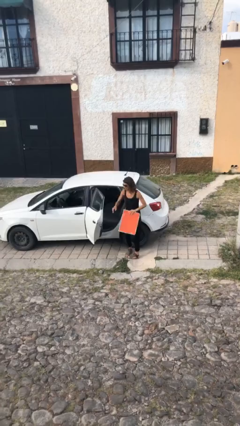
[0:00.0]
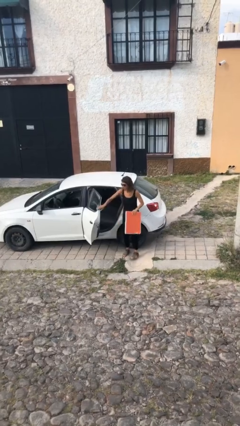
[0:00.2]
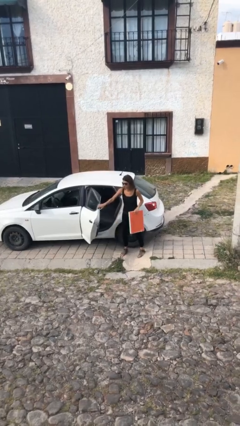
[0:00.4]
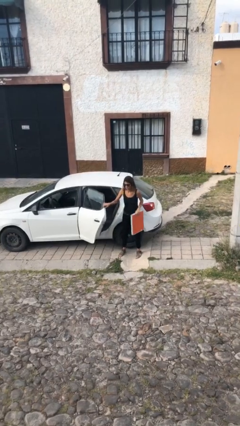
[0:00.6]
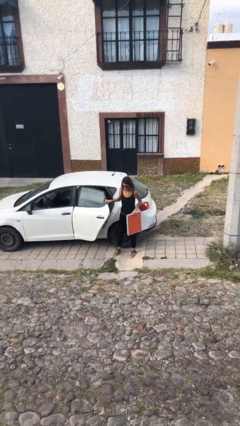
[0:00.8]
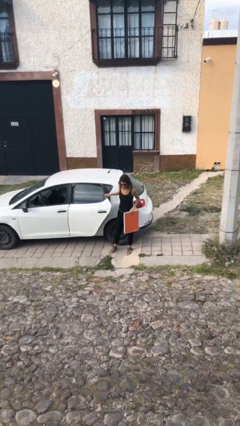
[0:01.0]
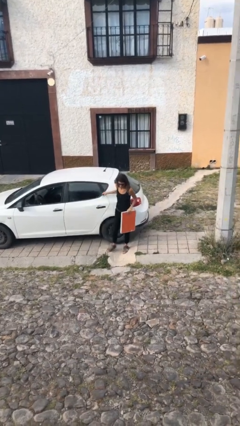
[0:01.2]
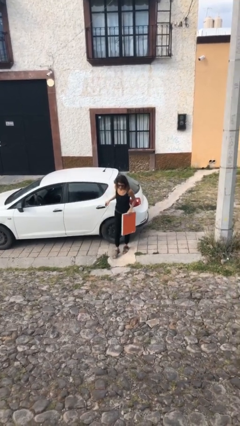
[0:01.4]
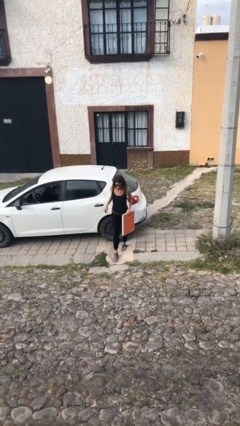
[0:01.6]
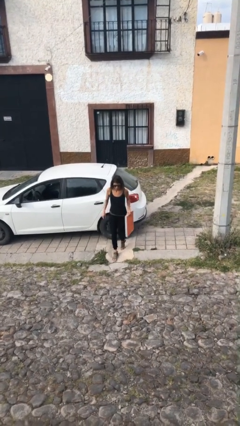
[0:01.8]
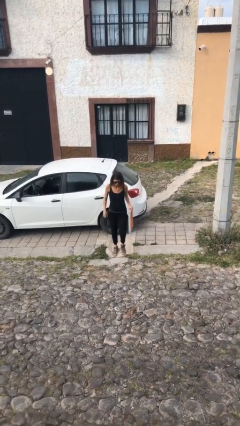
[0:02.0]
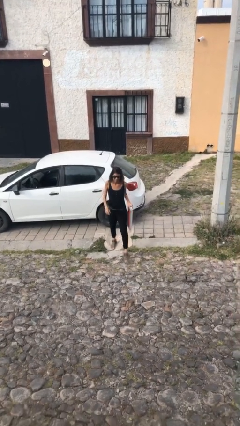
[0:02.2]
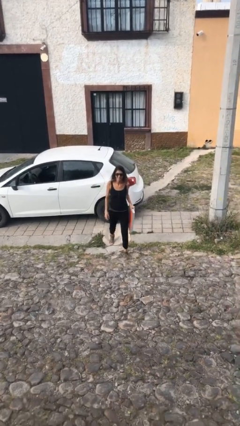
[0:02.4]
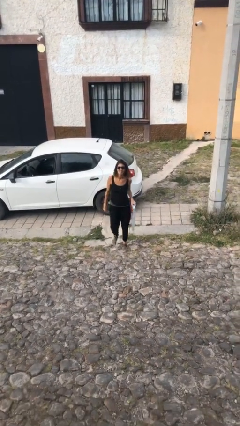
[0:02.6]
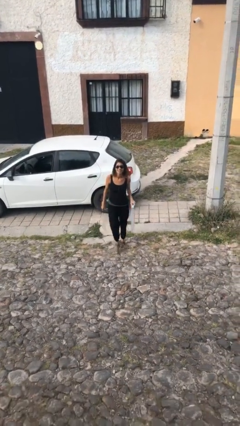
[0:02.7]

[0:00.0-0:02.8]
person closes car door

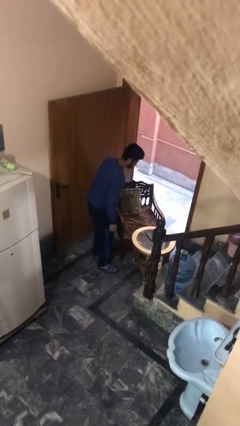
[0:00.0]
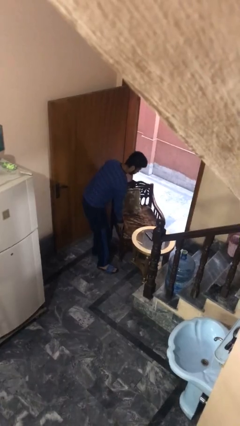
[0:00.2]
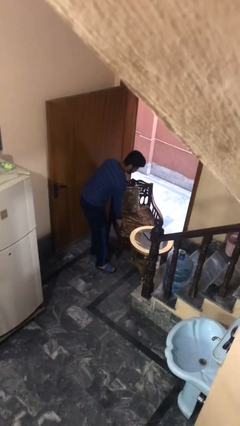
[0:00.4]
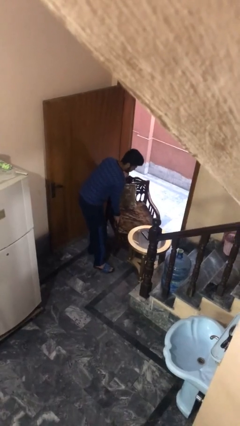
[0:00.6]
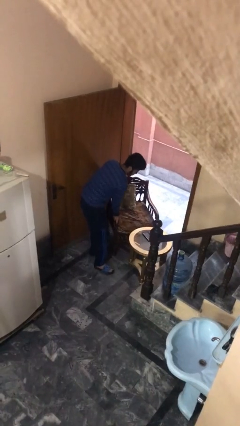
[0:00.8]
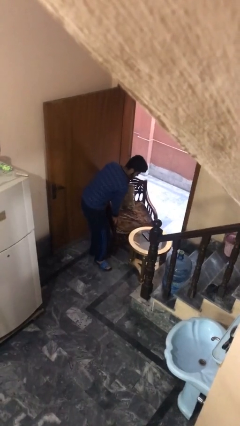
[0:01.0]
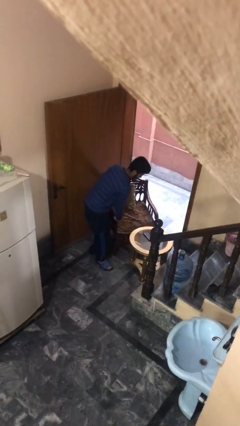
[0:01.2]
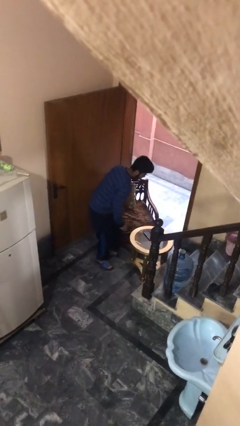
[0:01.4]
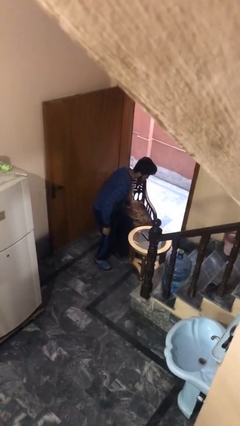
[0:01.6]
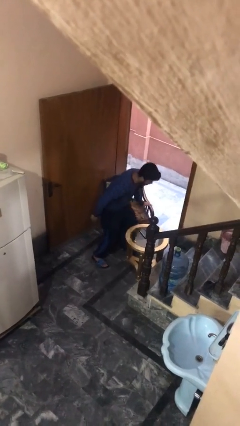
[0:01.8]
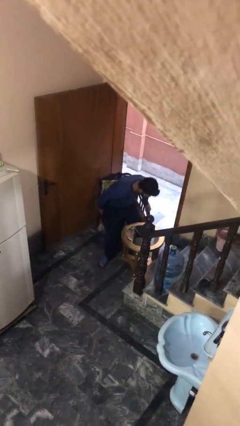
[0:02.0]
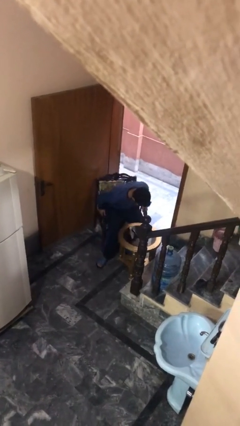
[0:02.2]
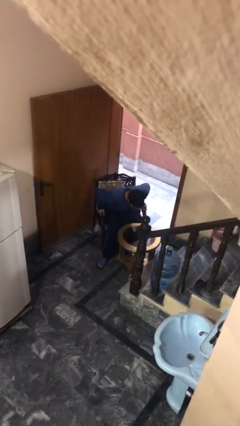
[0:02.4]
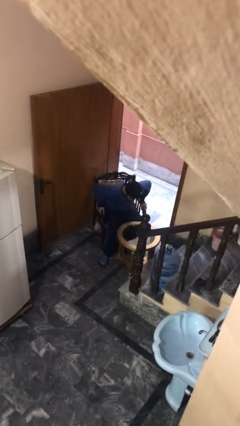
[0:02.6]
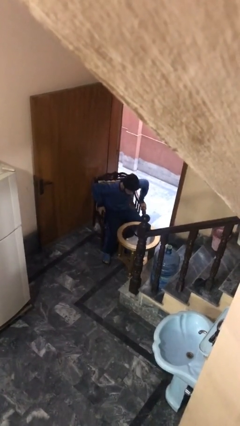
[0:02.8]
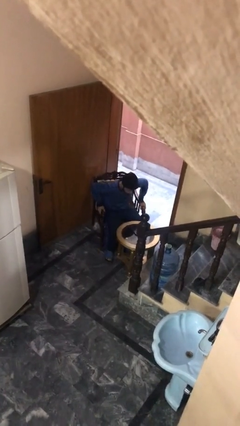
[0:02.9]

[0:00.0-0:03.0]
person sits down

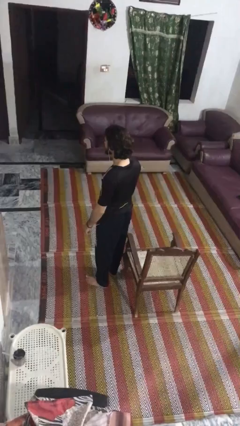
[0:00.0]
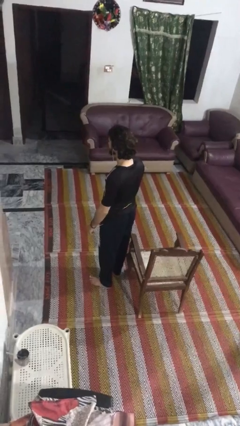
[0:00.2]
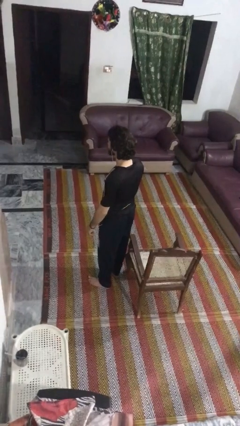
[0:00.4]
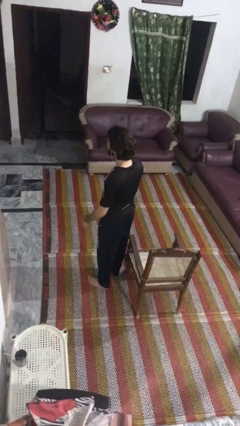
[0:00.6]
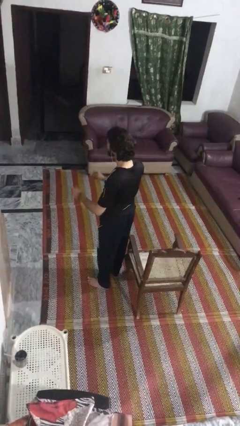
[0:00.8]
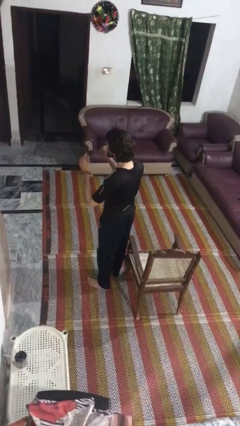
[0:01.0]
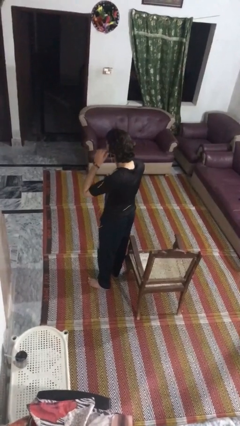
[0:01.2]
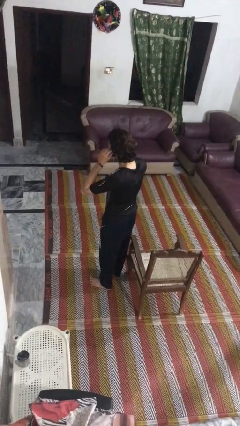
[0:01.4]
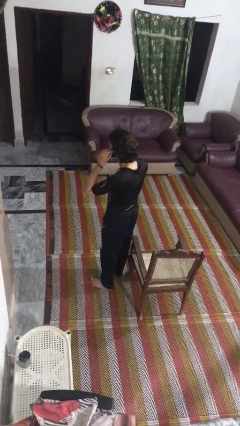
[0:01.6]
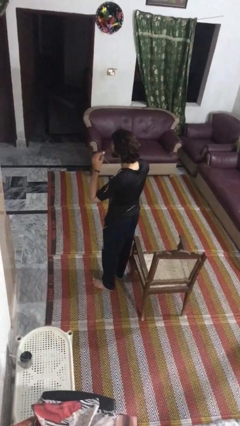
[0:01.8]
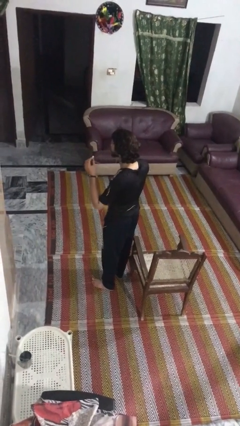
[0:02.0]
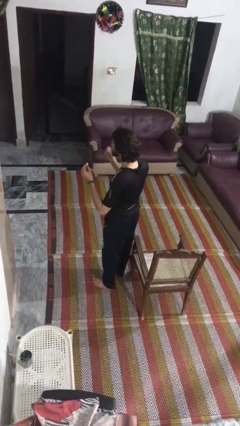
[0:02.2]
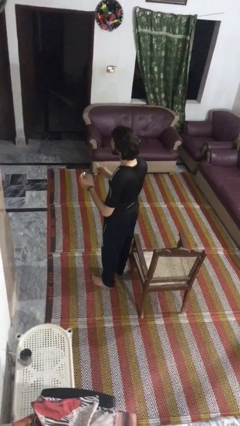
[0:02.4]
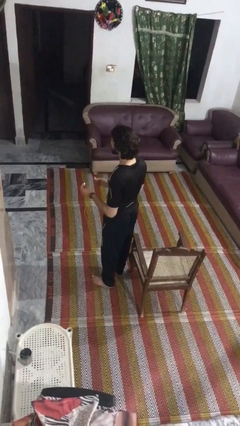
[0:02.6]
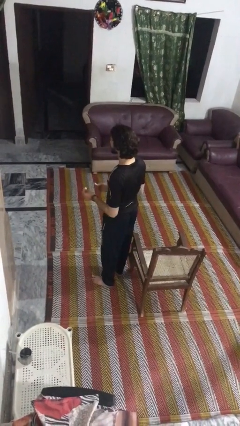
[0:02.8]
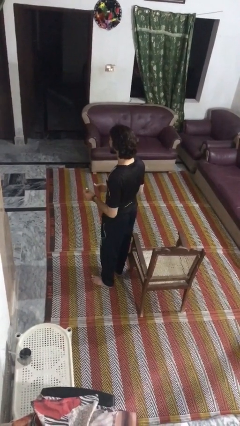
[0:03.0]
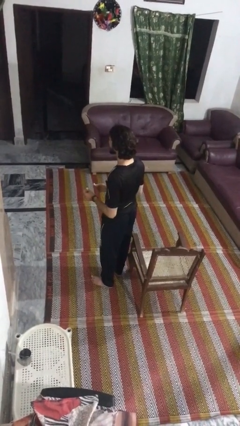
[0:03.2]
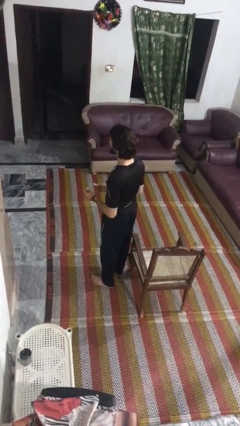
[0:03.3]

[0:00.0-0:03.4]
person takes off headphones

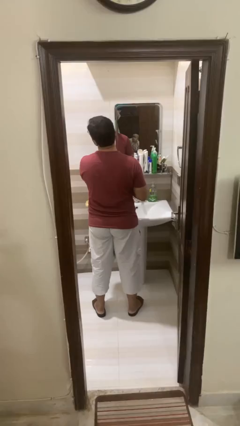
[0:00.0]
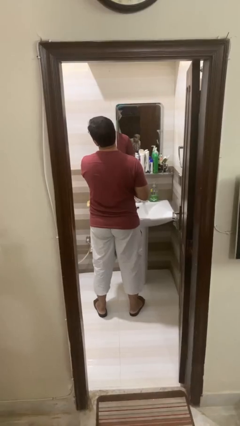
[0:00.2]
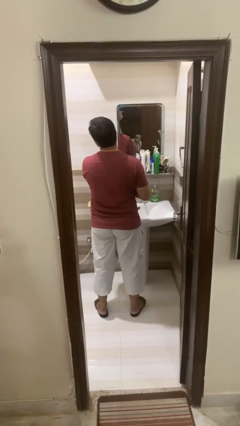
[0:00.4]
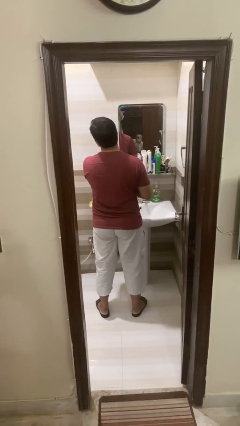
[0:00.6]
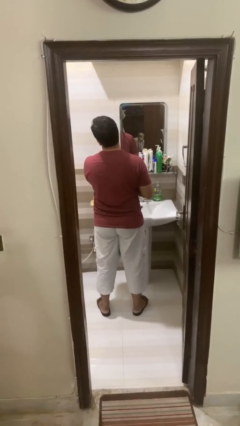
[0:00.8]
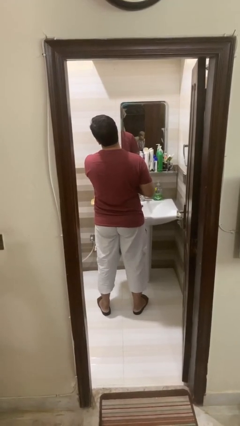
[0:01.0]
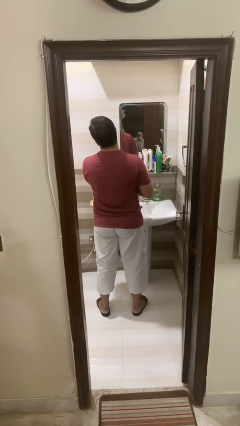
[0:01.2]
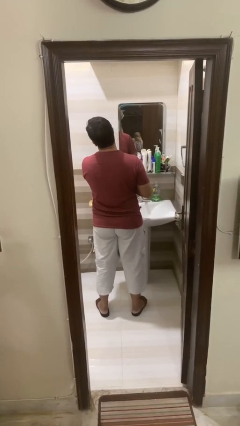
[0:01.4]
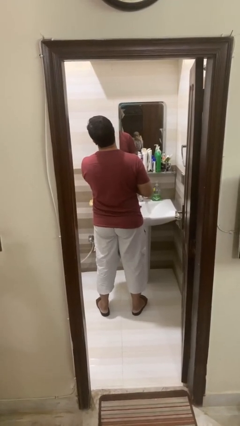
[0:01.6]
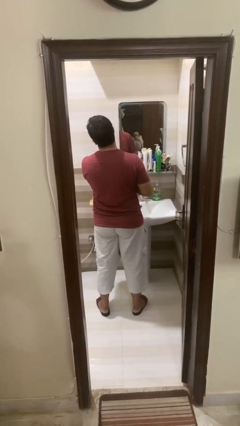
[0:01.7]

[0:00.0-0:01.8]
person applies shaving cream

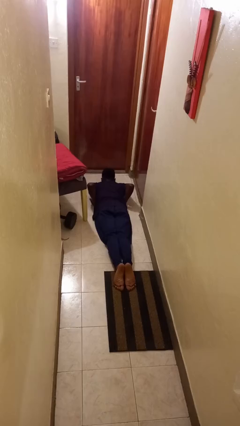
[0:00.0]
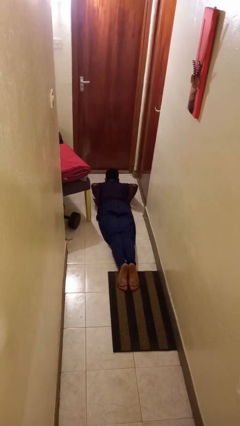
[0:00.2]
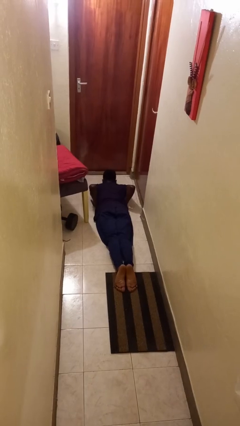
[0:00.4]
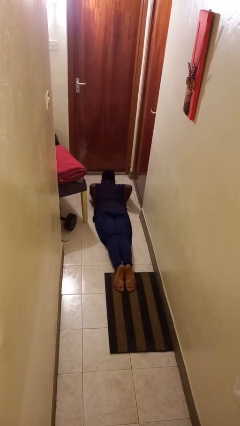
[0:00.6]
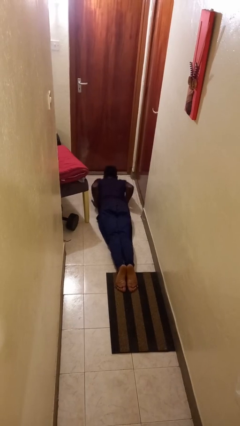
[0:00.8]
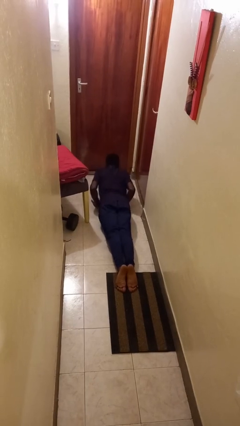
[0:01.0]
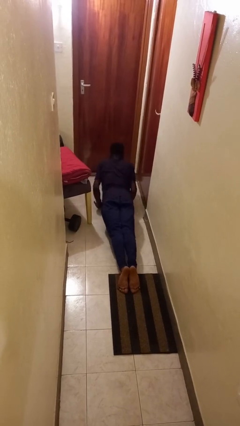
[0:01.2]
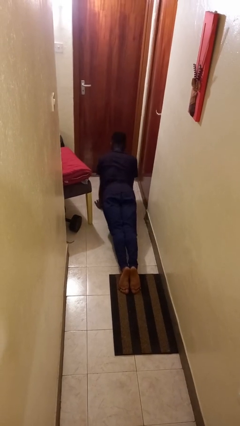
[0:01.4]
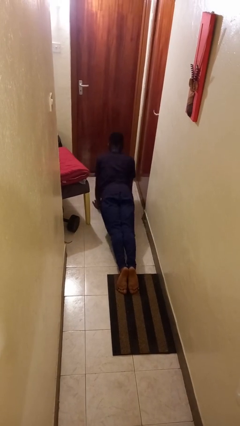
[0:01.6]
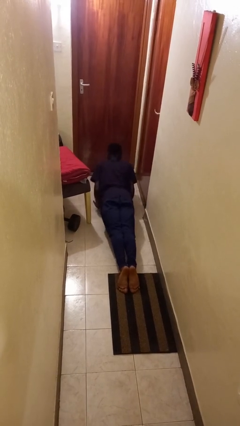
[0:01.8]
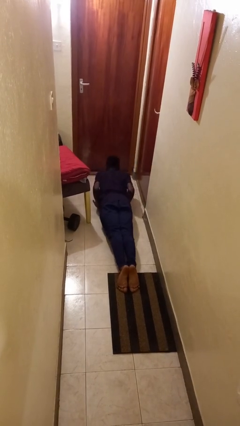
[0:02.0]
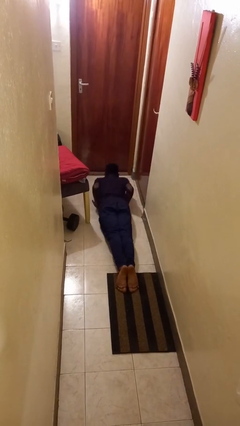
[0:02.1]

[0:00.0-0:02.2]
person exercises with pushup

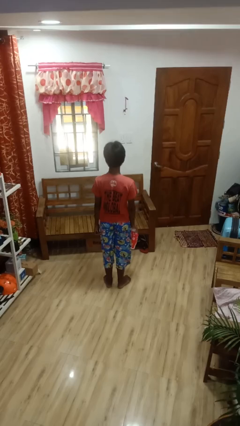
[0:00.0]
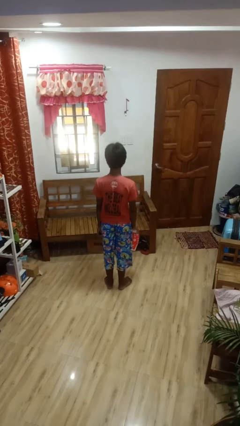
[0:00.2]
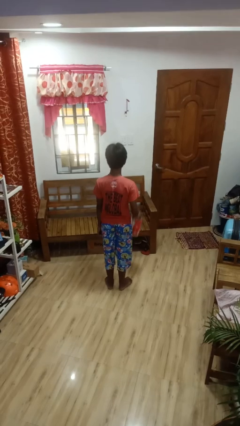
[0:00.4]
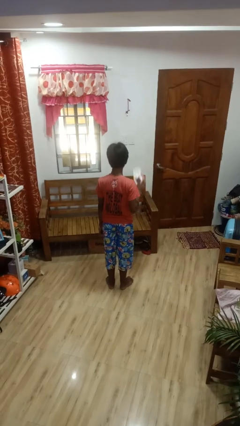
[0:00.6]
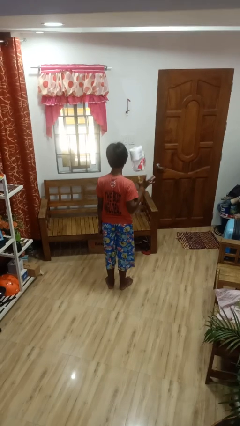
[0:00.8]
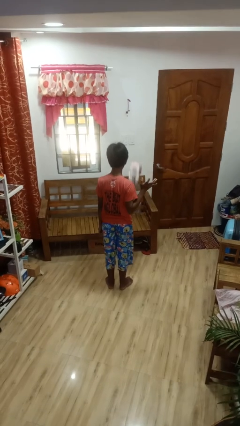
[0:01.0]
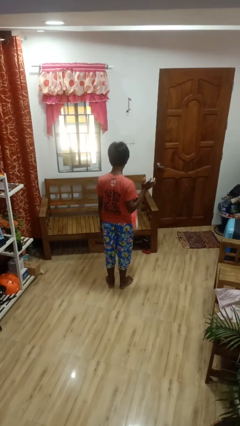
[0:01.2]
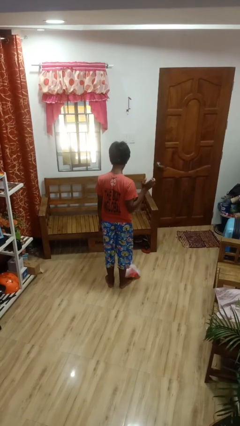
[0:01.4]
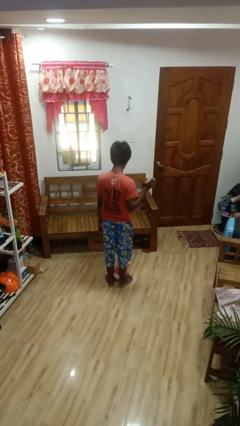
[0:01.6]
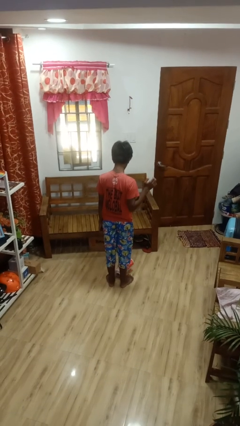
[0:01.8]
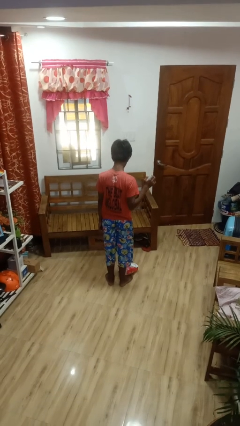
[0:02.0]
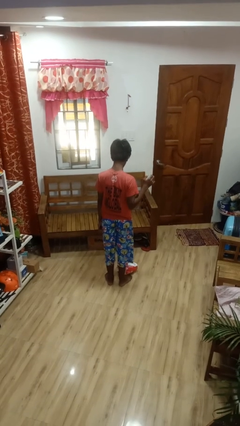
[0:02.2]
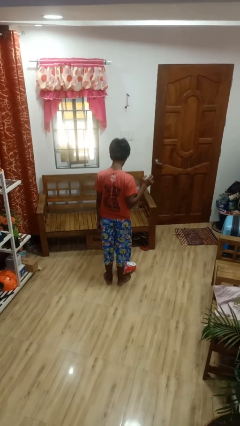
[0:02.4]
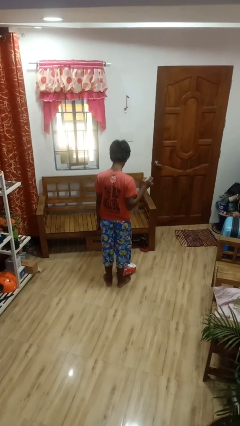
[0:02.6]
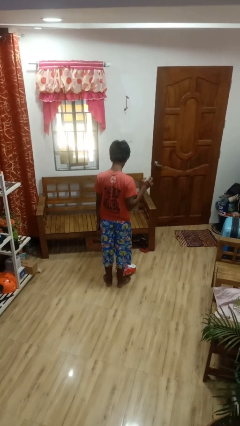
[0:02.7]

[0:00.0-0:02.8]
person throws object into air

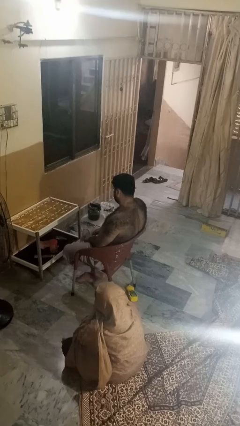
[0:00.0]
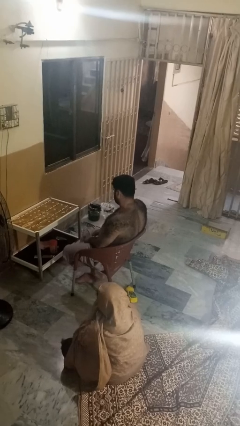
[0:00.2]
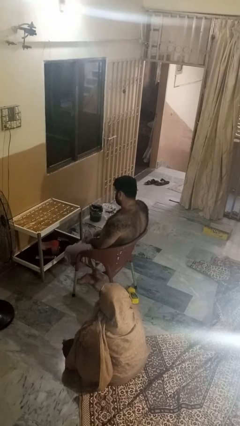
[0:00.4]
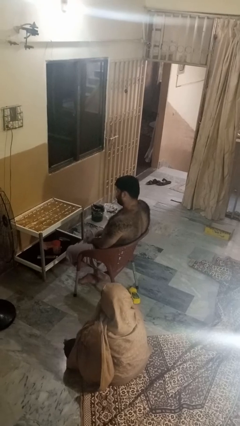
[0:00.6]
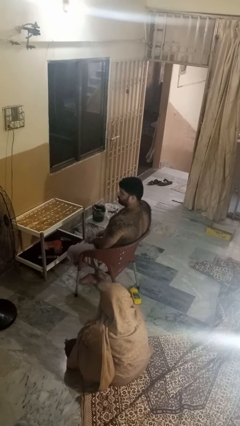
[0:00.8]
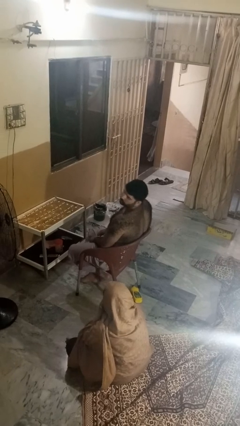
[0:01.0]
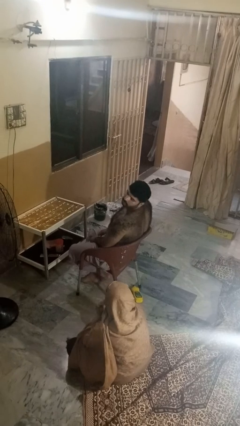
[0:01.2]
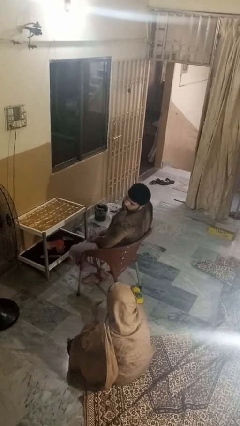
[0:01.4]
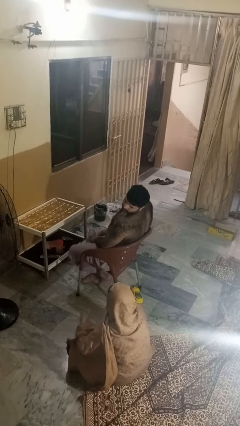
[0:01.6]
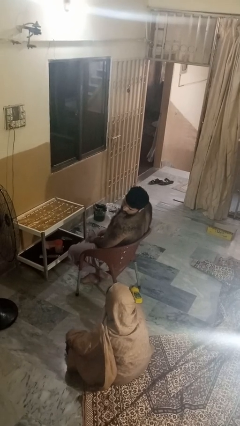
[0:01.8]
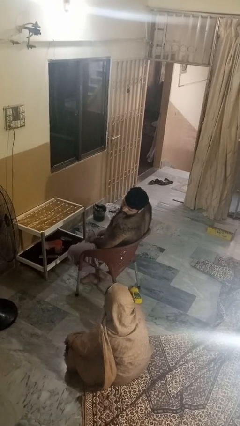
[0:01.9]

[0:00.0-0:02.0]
person looks over shoulder
